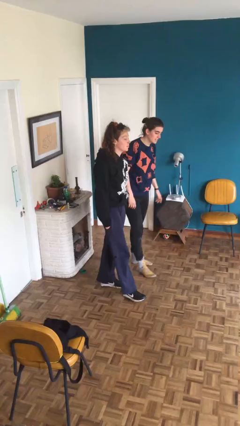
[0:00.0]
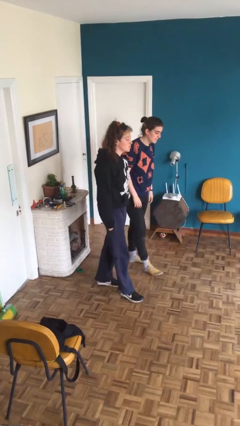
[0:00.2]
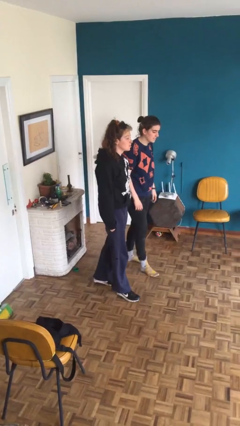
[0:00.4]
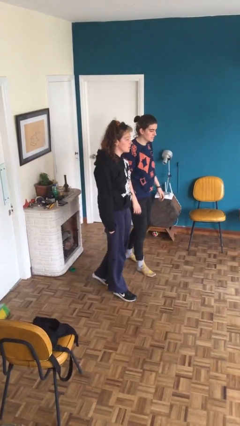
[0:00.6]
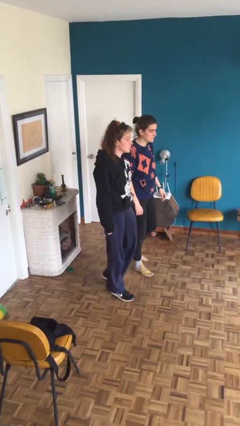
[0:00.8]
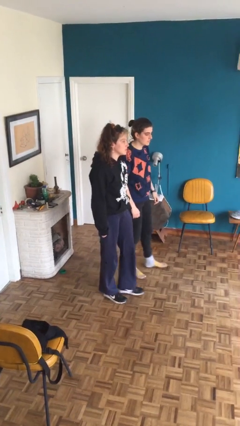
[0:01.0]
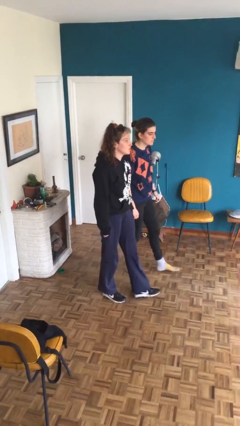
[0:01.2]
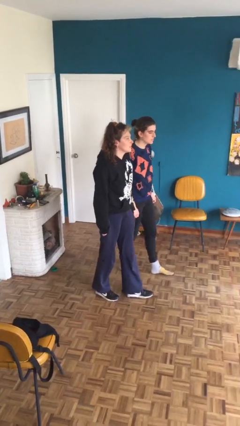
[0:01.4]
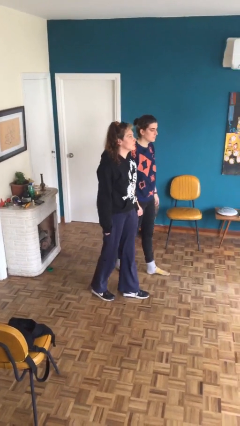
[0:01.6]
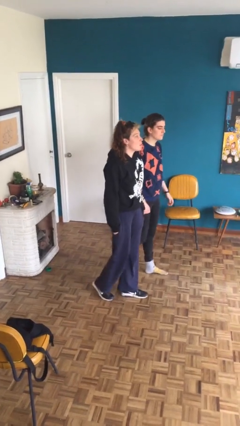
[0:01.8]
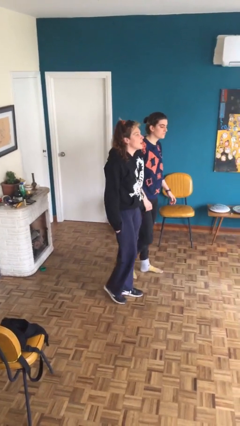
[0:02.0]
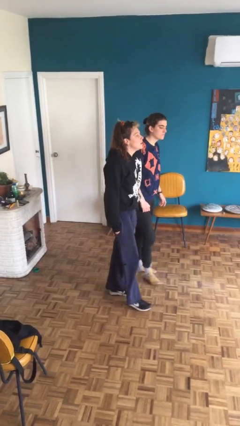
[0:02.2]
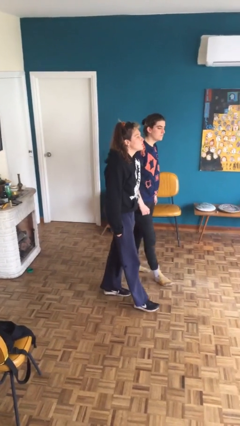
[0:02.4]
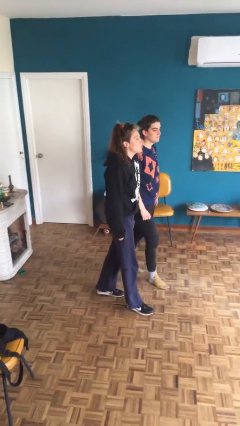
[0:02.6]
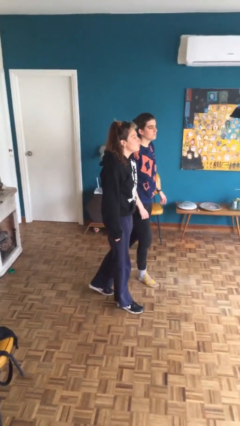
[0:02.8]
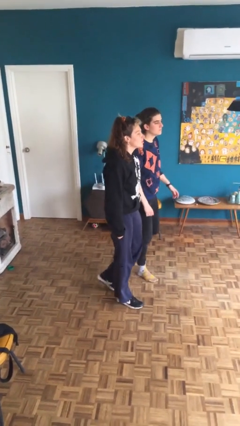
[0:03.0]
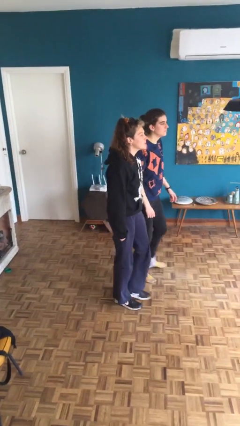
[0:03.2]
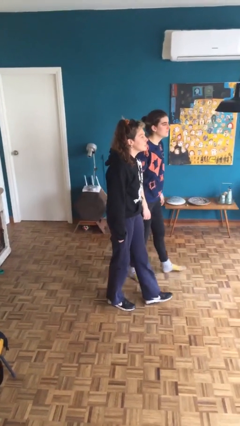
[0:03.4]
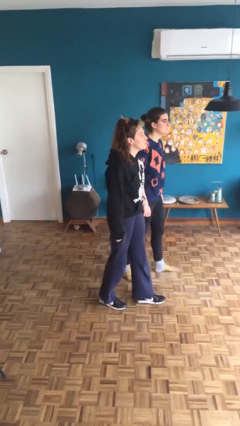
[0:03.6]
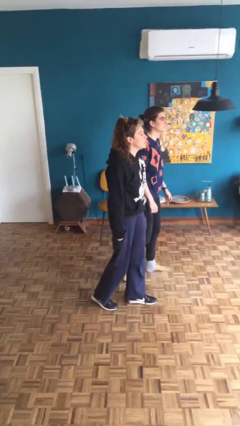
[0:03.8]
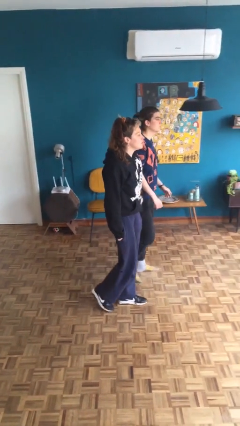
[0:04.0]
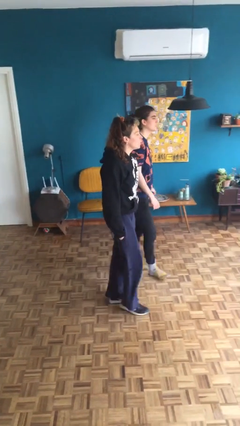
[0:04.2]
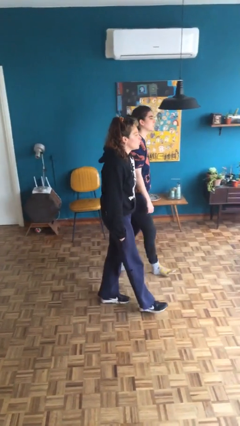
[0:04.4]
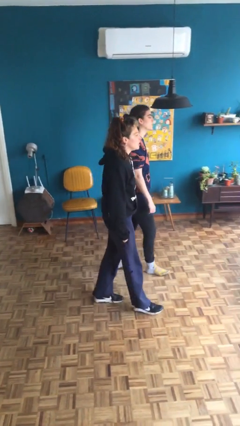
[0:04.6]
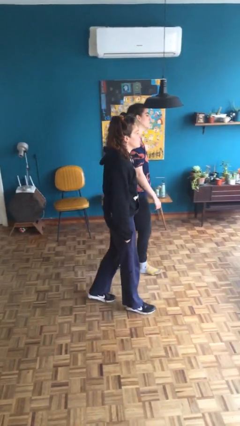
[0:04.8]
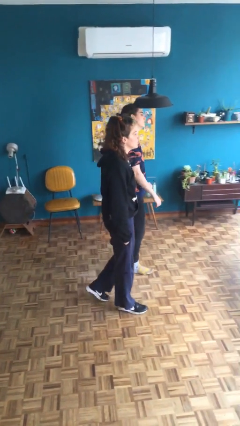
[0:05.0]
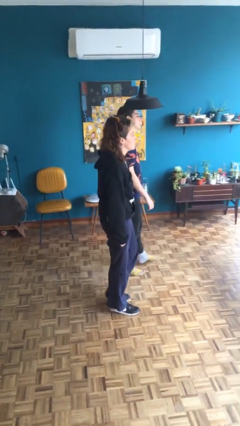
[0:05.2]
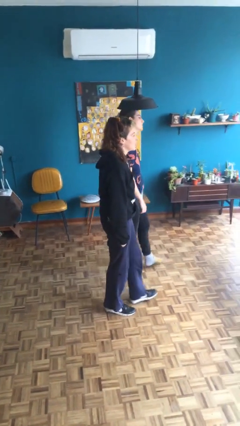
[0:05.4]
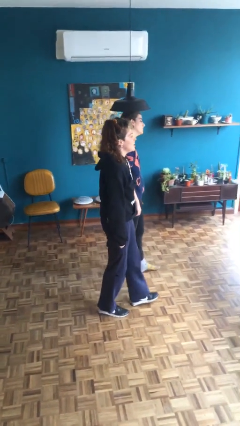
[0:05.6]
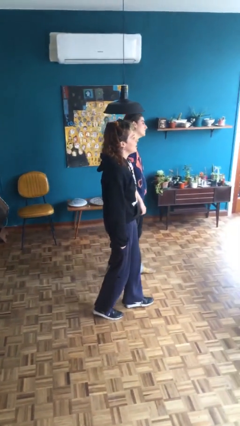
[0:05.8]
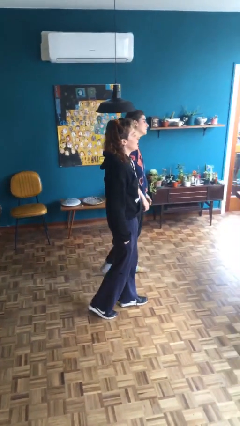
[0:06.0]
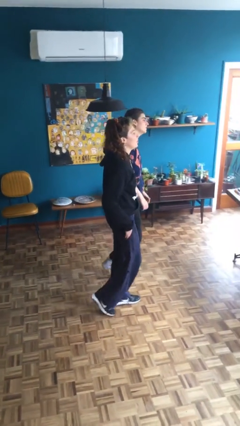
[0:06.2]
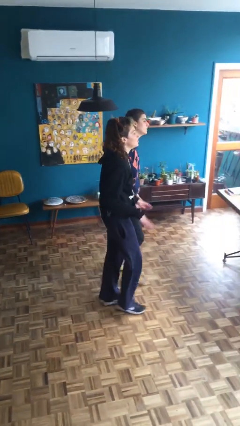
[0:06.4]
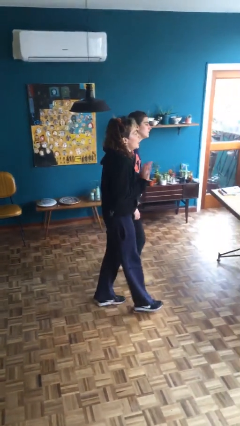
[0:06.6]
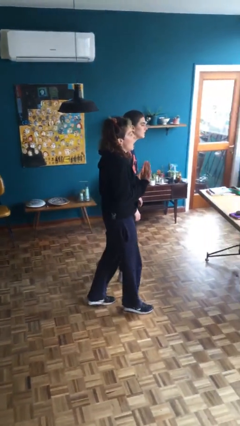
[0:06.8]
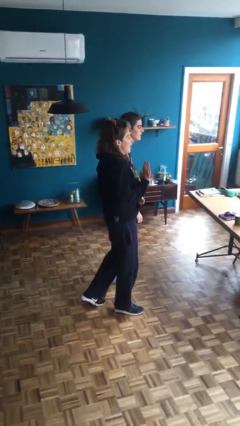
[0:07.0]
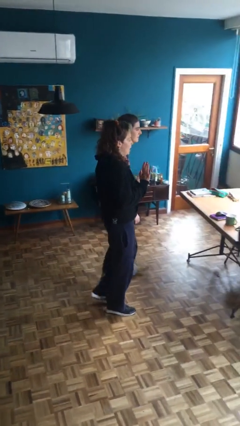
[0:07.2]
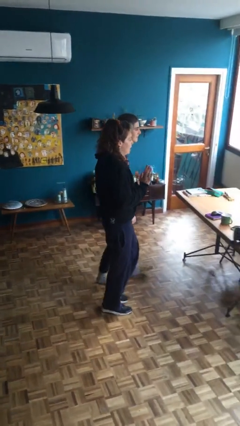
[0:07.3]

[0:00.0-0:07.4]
person talks to person

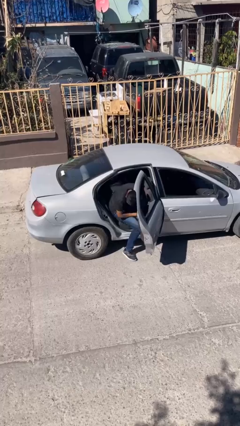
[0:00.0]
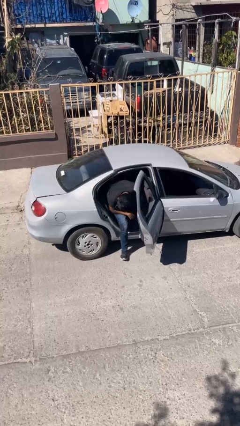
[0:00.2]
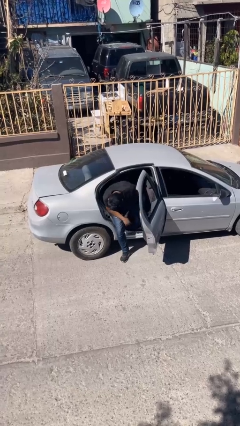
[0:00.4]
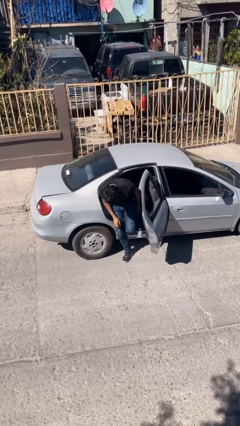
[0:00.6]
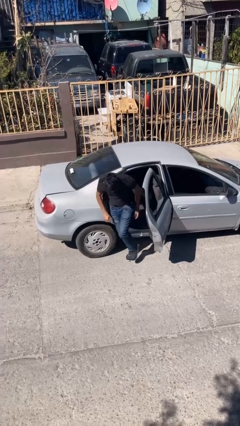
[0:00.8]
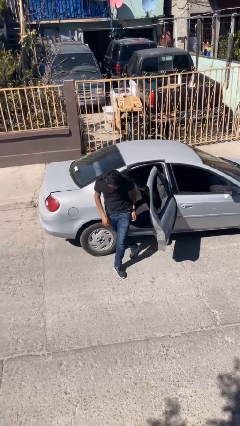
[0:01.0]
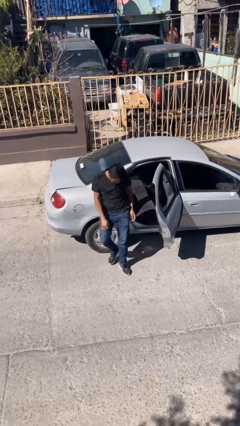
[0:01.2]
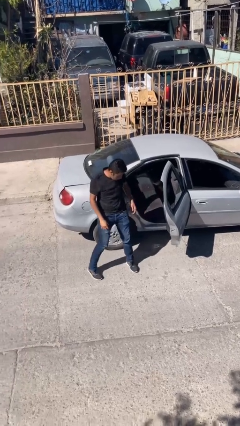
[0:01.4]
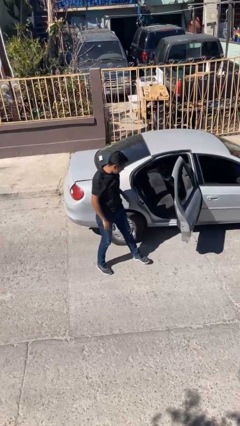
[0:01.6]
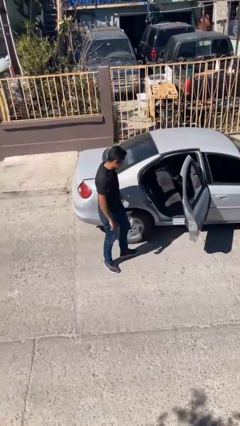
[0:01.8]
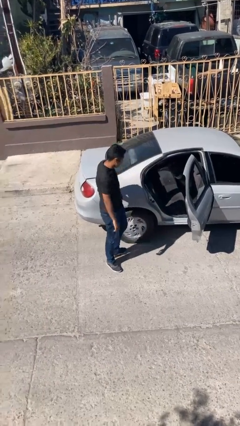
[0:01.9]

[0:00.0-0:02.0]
person exits car

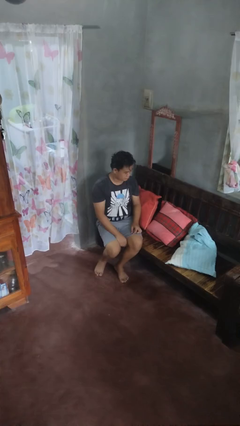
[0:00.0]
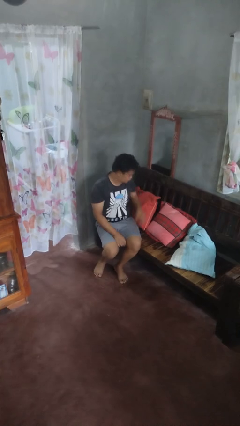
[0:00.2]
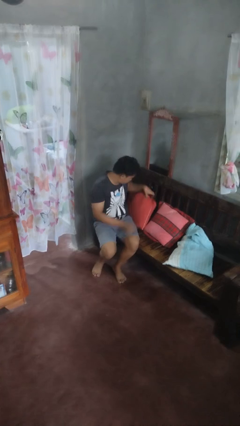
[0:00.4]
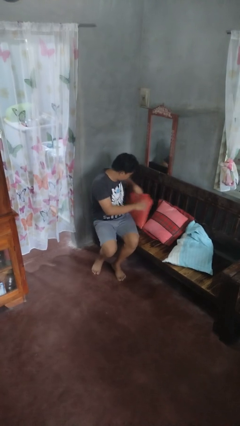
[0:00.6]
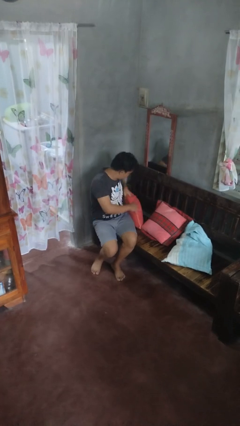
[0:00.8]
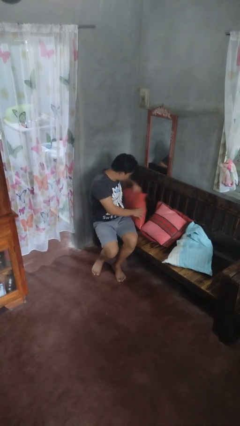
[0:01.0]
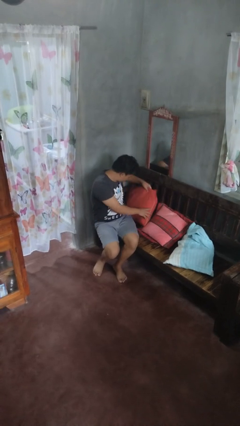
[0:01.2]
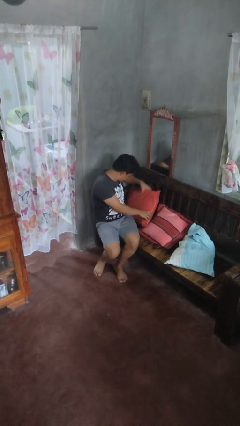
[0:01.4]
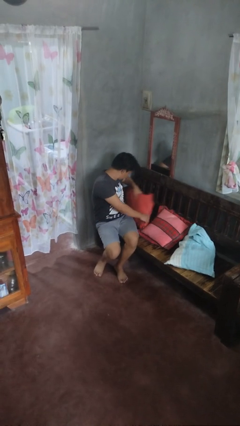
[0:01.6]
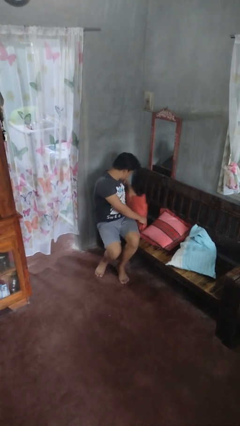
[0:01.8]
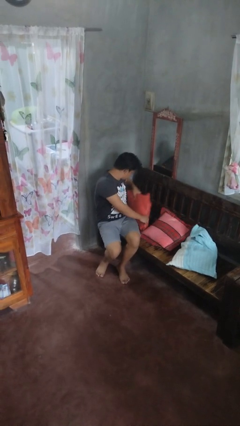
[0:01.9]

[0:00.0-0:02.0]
person searches in couch

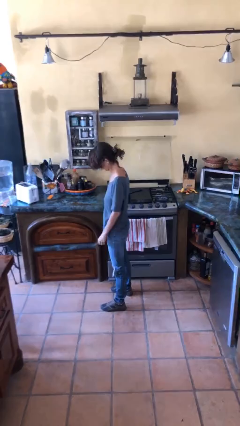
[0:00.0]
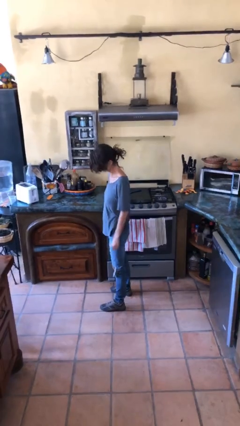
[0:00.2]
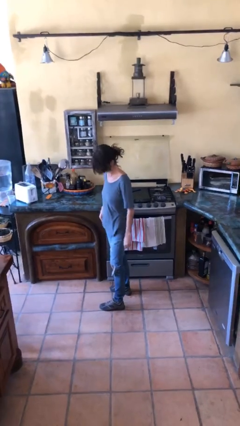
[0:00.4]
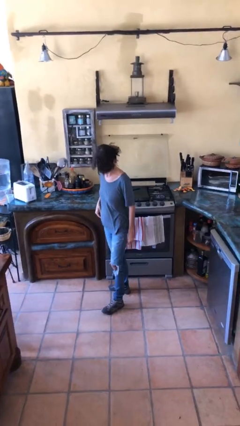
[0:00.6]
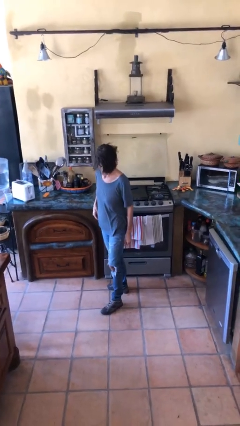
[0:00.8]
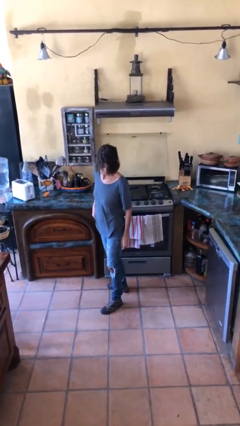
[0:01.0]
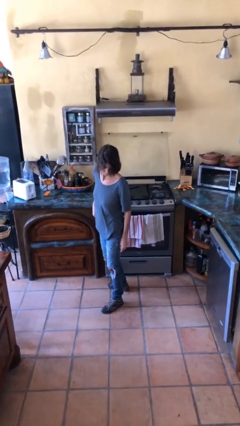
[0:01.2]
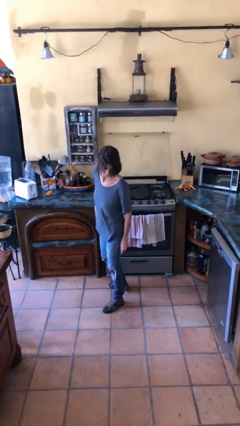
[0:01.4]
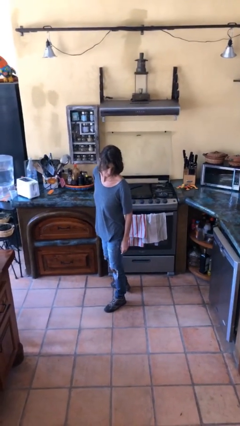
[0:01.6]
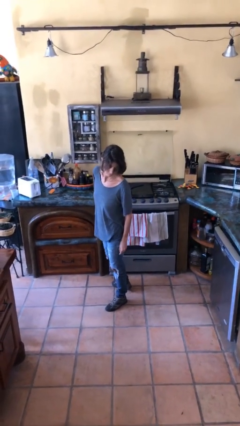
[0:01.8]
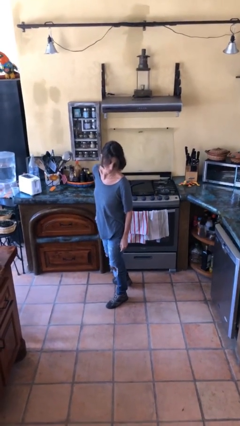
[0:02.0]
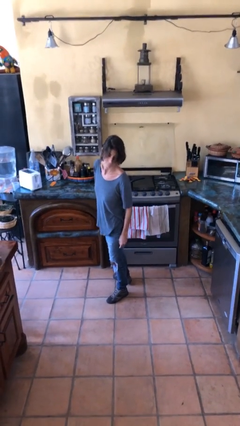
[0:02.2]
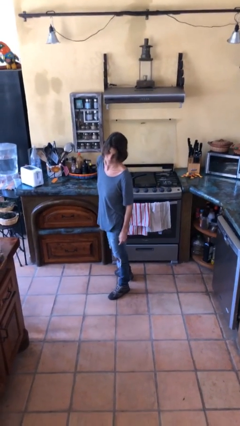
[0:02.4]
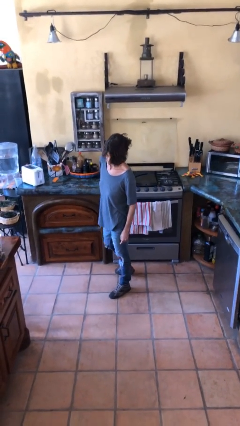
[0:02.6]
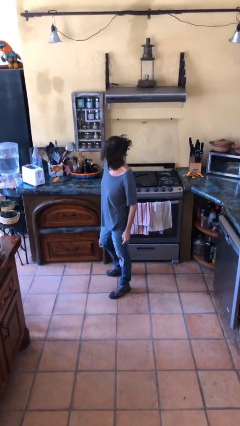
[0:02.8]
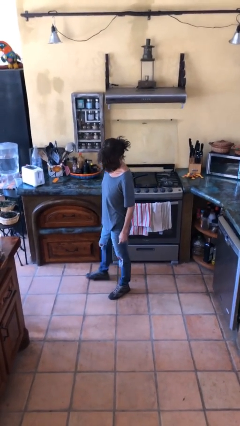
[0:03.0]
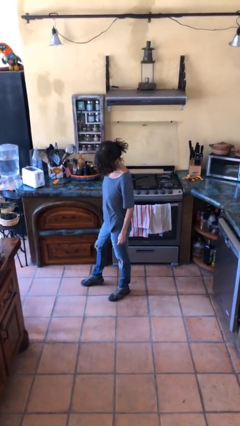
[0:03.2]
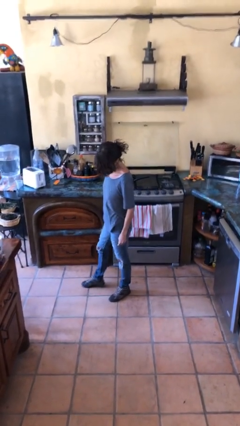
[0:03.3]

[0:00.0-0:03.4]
person puts hands in back pockets

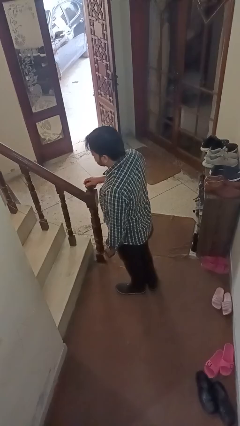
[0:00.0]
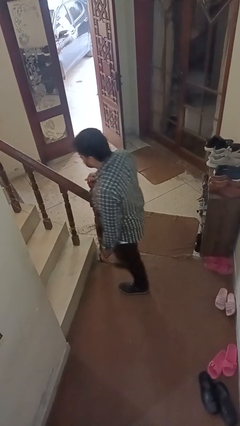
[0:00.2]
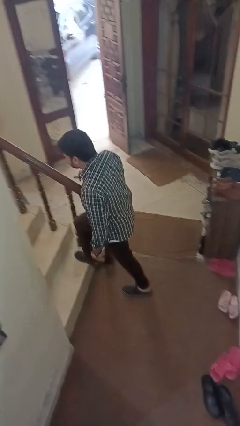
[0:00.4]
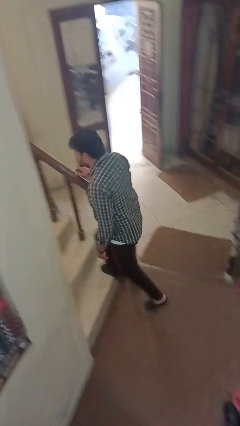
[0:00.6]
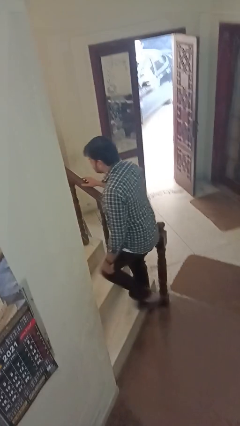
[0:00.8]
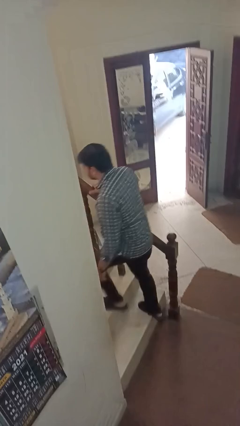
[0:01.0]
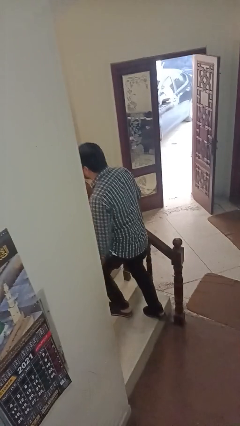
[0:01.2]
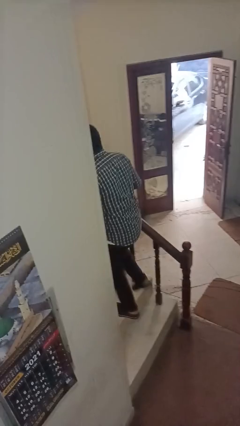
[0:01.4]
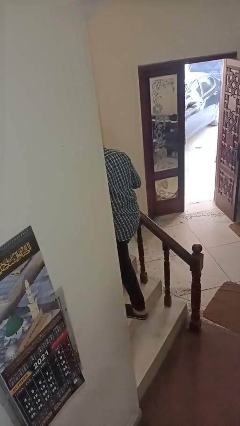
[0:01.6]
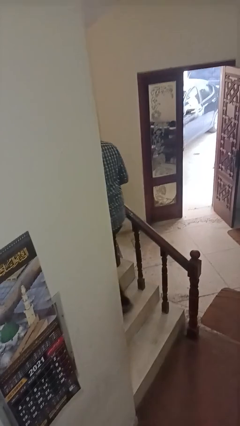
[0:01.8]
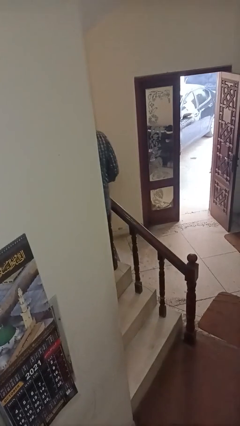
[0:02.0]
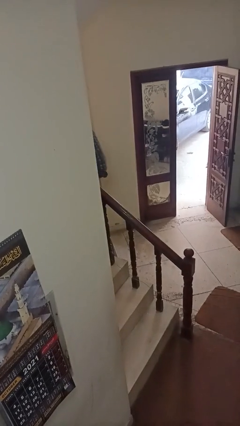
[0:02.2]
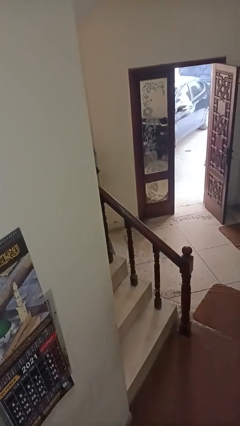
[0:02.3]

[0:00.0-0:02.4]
person climbs up stairs
